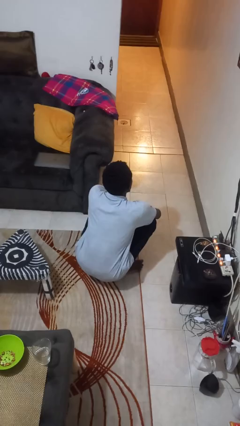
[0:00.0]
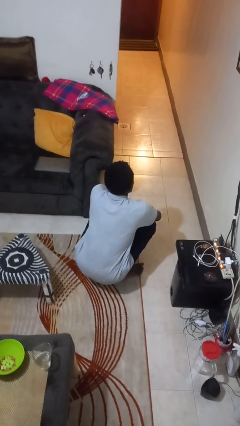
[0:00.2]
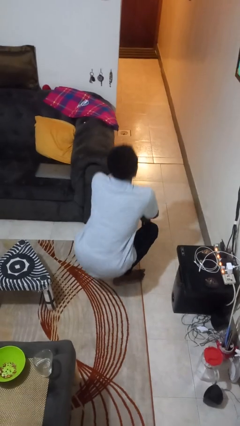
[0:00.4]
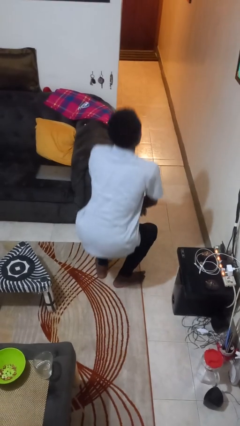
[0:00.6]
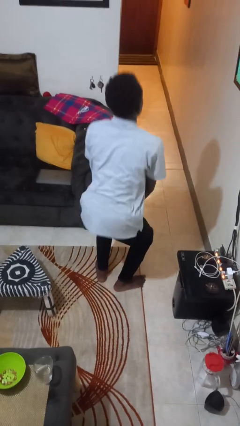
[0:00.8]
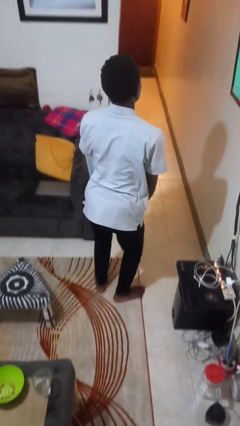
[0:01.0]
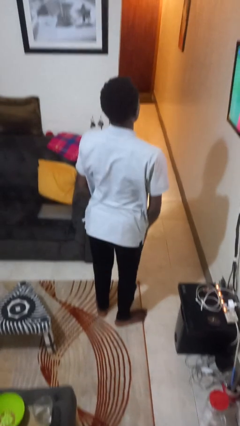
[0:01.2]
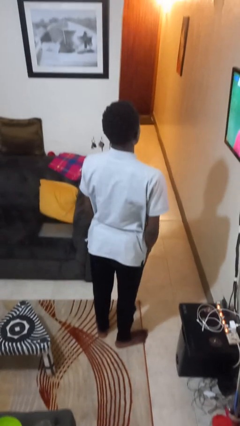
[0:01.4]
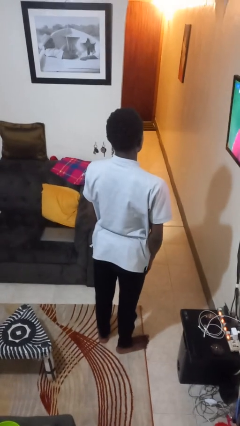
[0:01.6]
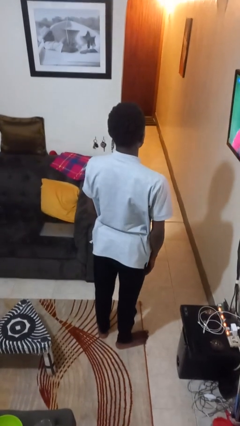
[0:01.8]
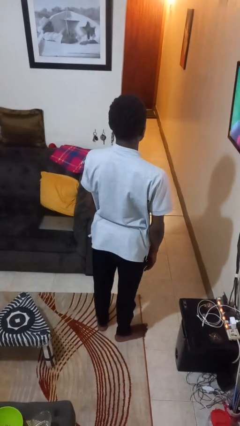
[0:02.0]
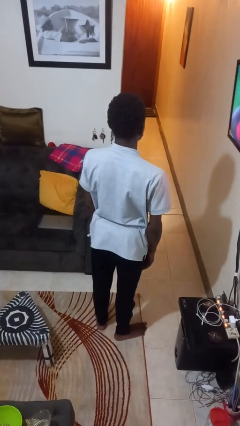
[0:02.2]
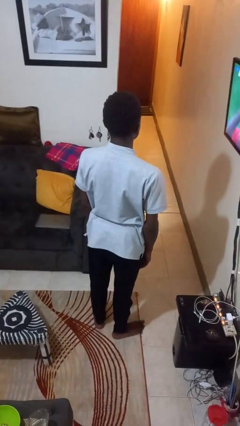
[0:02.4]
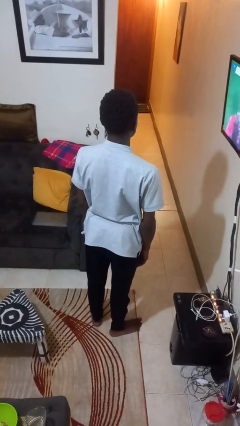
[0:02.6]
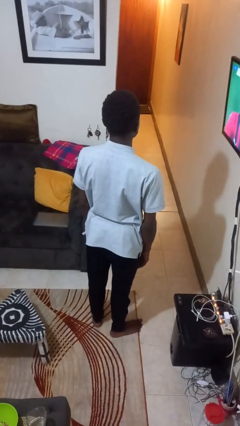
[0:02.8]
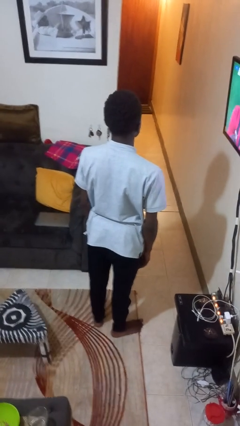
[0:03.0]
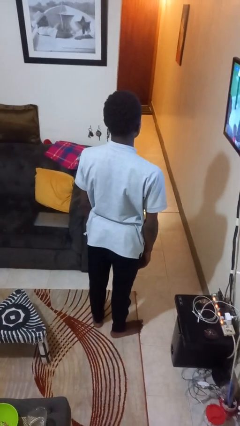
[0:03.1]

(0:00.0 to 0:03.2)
person stands up

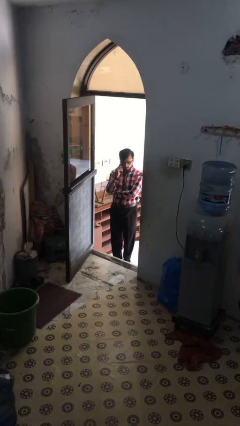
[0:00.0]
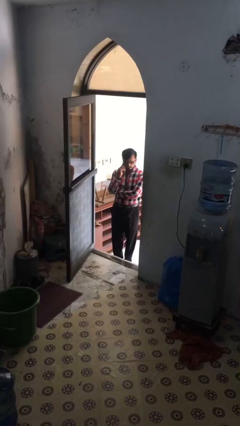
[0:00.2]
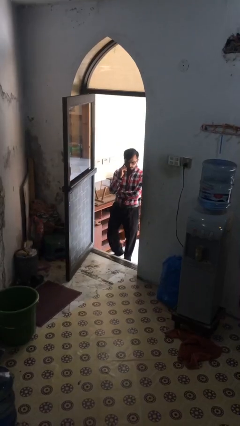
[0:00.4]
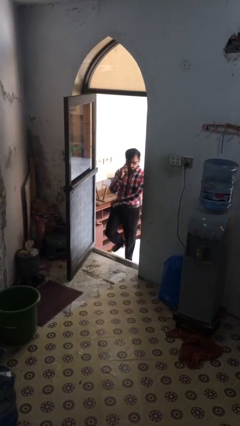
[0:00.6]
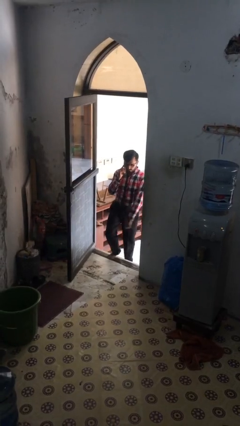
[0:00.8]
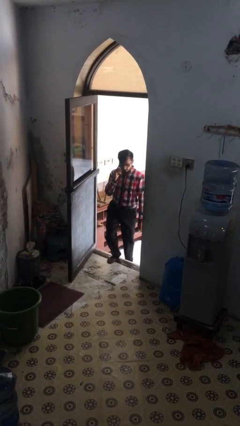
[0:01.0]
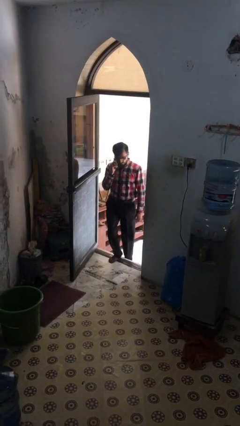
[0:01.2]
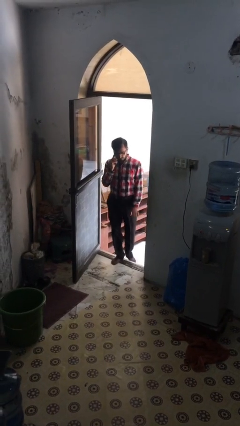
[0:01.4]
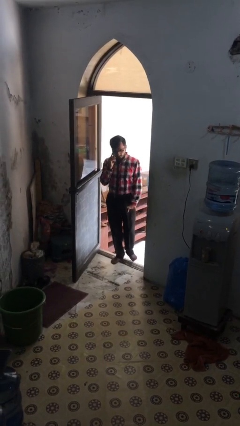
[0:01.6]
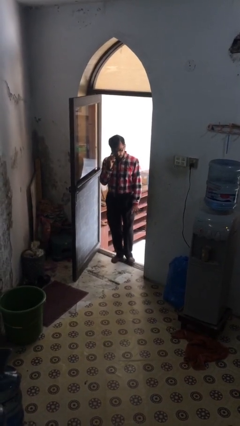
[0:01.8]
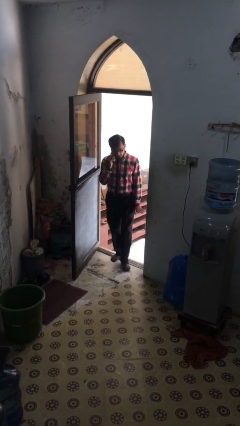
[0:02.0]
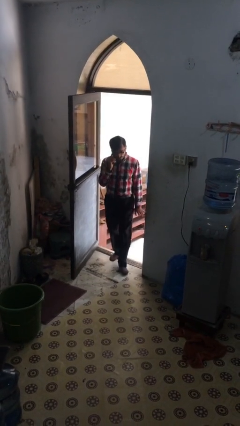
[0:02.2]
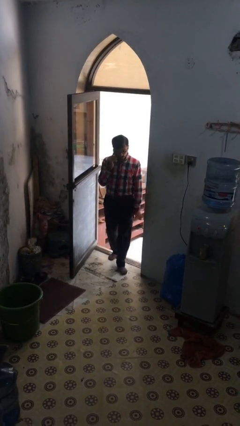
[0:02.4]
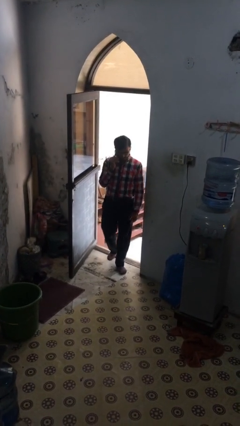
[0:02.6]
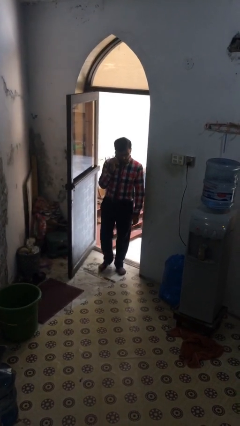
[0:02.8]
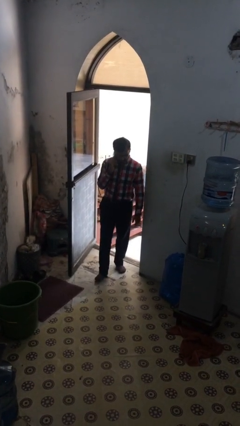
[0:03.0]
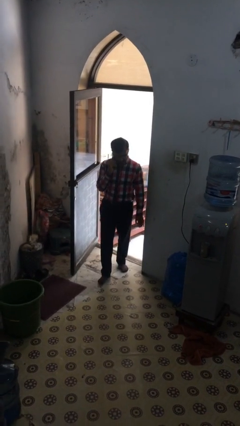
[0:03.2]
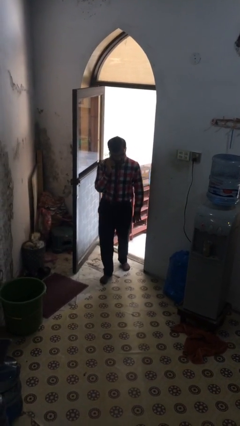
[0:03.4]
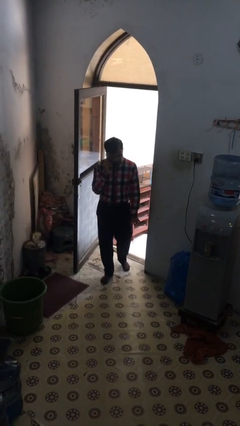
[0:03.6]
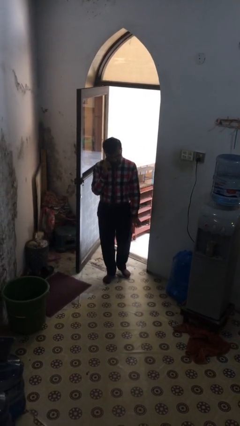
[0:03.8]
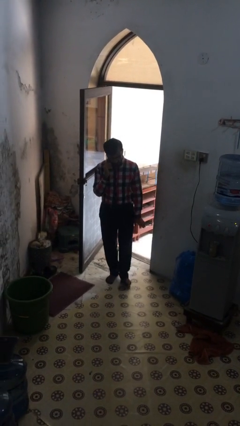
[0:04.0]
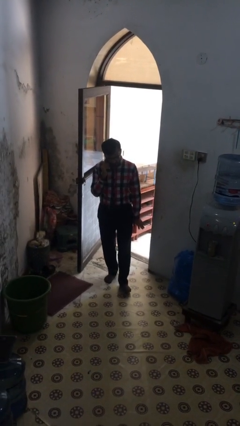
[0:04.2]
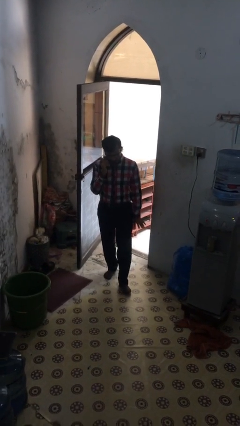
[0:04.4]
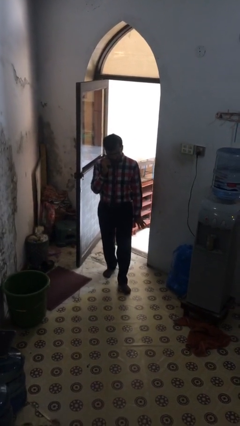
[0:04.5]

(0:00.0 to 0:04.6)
person enters scene through structure

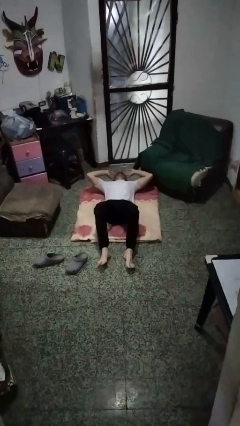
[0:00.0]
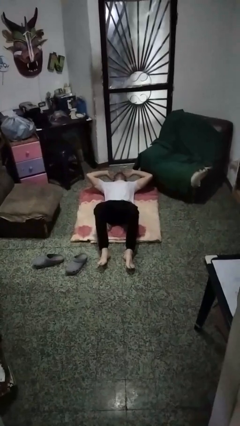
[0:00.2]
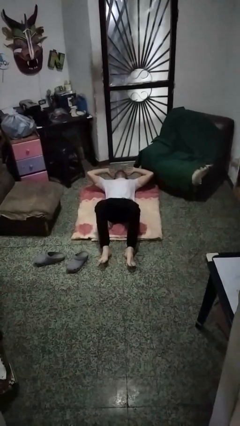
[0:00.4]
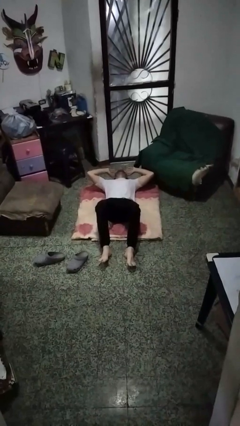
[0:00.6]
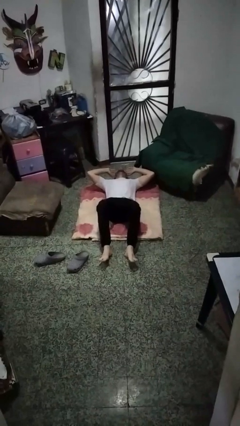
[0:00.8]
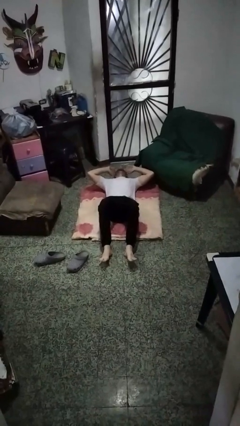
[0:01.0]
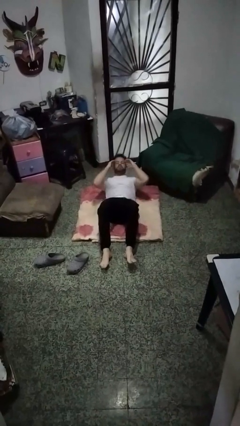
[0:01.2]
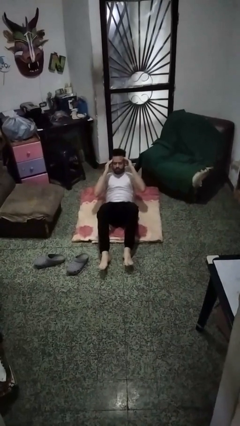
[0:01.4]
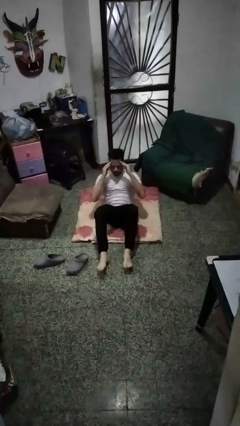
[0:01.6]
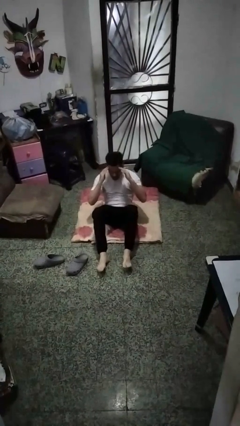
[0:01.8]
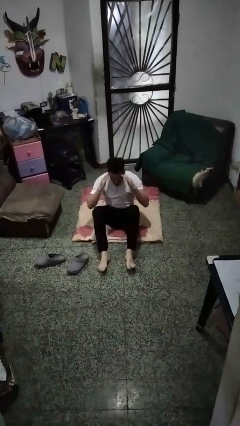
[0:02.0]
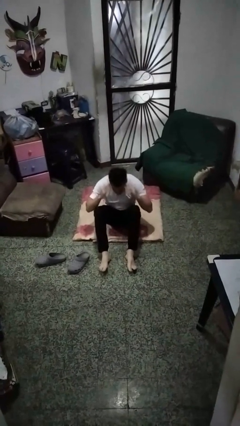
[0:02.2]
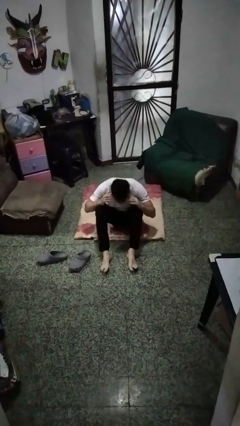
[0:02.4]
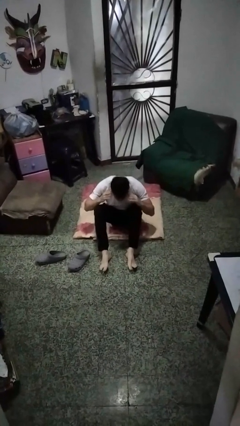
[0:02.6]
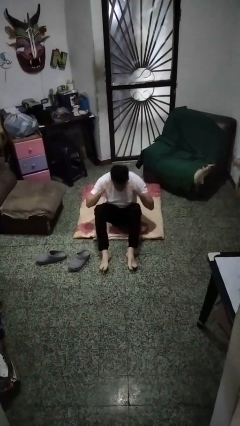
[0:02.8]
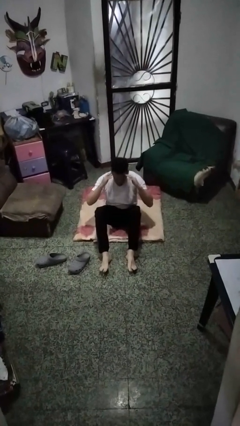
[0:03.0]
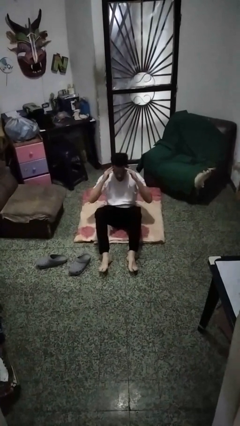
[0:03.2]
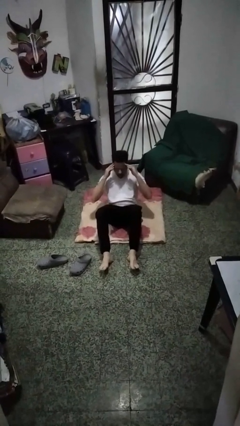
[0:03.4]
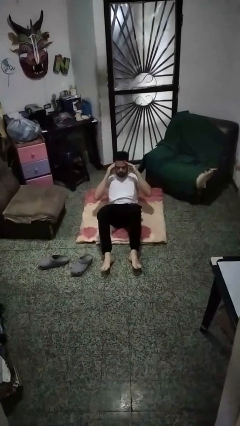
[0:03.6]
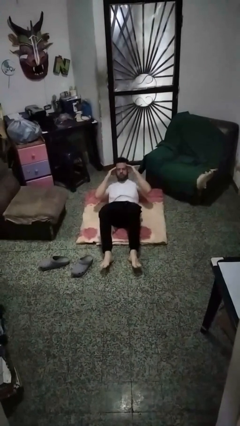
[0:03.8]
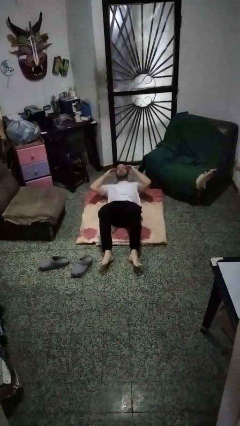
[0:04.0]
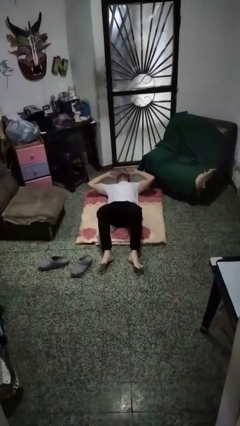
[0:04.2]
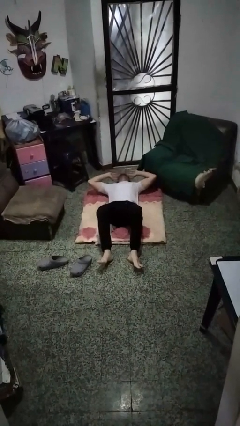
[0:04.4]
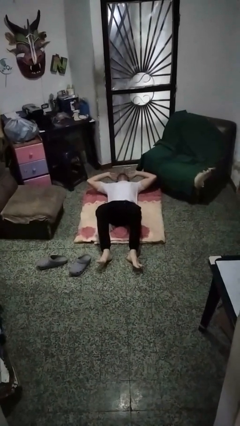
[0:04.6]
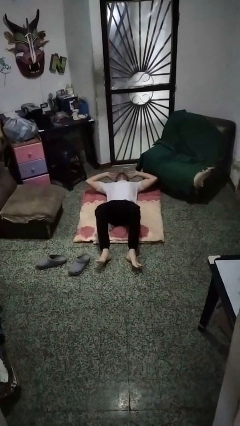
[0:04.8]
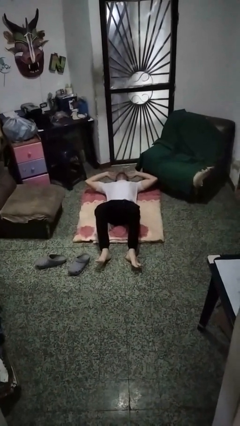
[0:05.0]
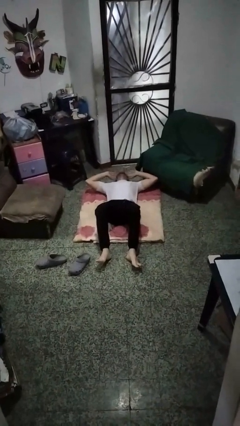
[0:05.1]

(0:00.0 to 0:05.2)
person exercises with situp

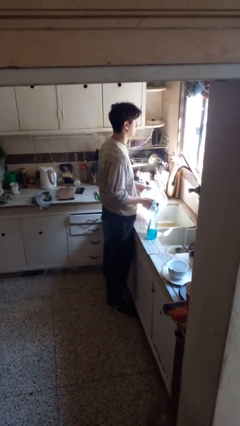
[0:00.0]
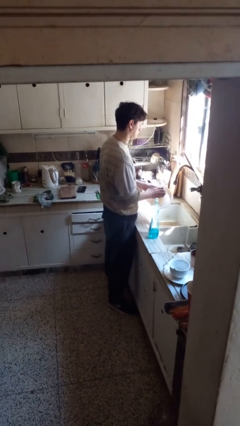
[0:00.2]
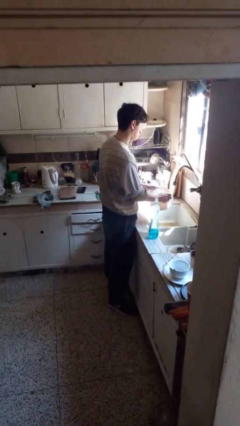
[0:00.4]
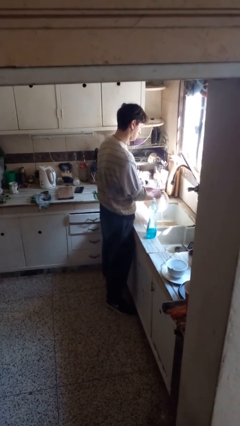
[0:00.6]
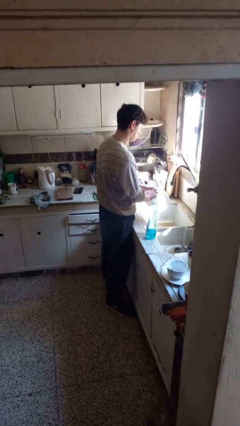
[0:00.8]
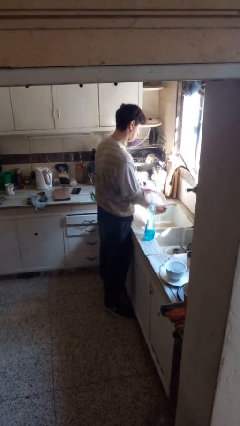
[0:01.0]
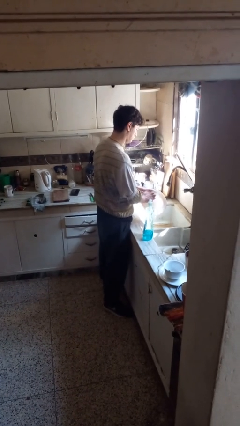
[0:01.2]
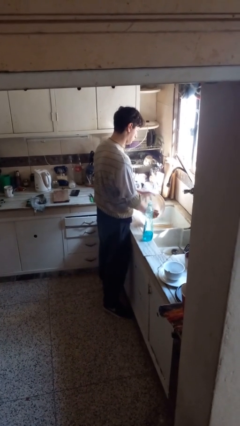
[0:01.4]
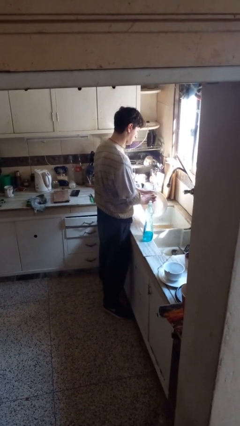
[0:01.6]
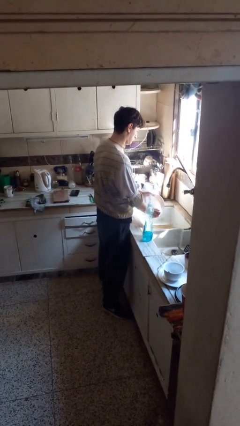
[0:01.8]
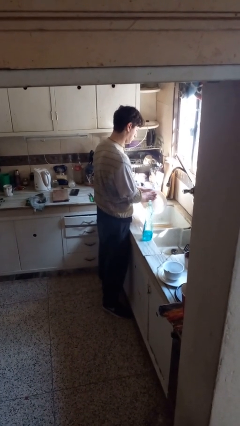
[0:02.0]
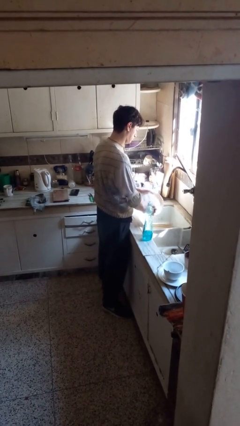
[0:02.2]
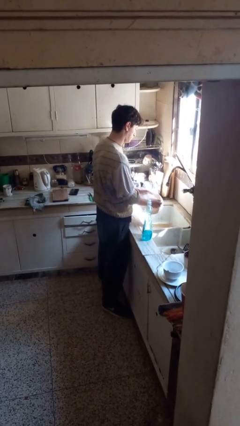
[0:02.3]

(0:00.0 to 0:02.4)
person washes dish

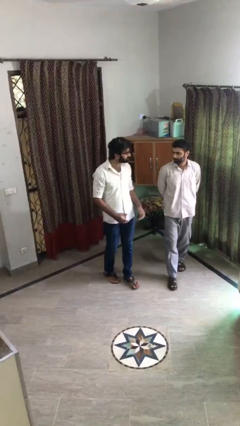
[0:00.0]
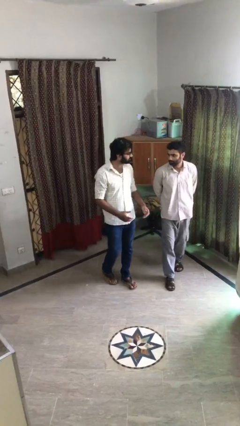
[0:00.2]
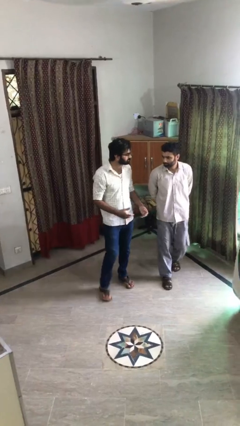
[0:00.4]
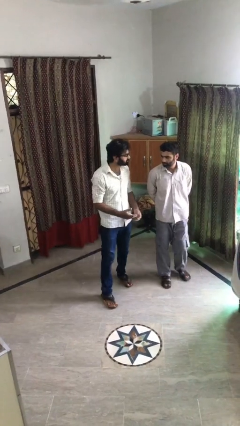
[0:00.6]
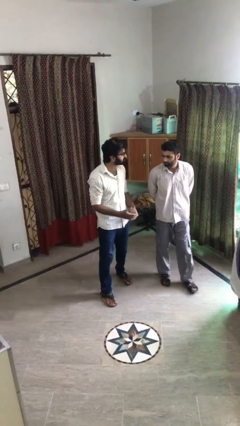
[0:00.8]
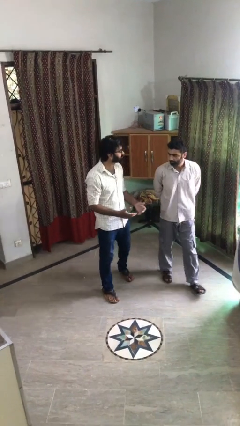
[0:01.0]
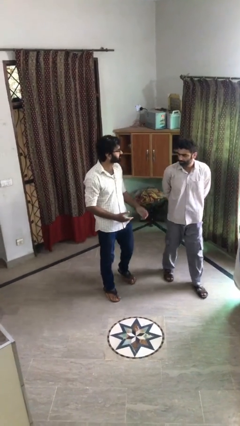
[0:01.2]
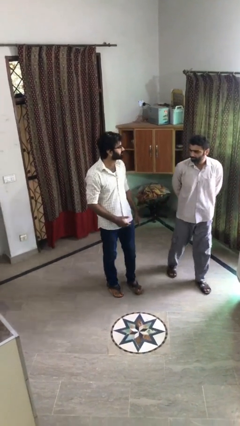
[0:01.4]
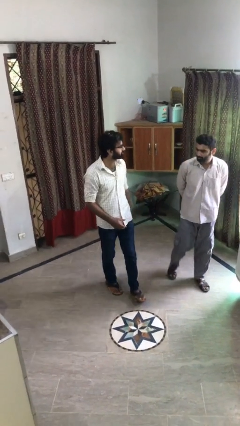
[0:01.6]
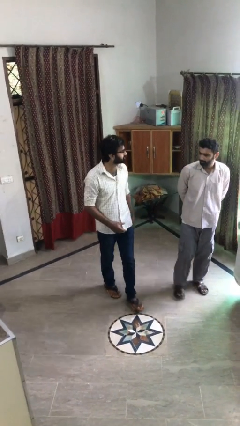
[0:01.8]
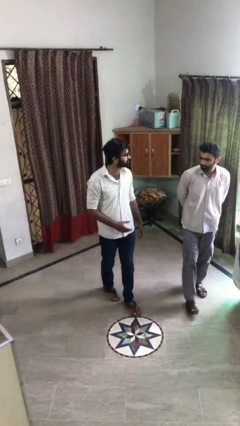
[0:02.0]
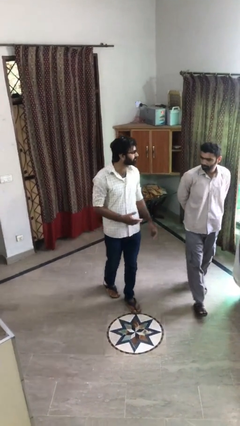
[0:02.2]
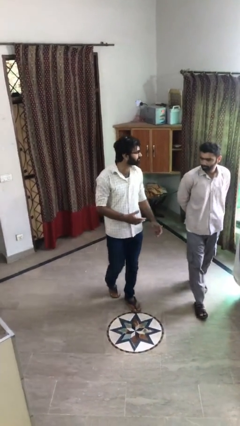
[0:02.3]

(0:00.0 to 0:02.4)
person talks to person
